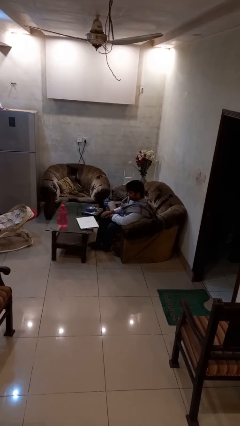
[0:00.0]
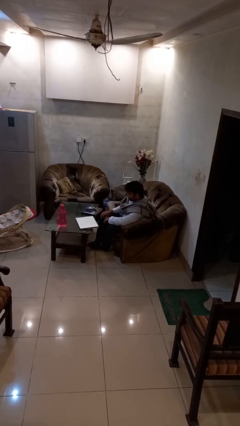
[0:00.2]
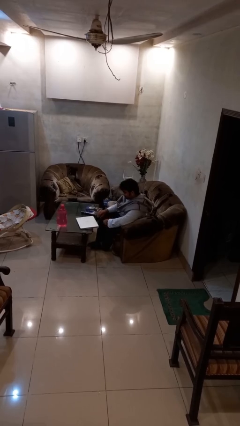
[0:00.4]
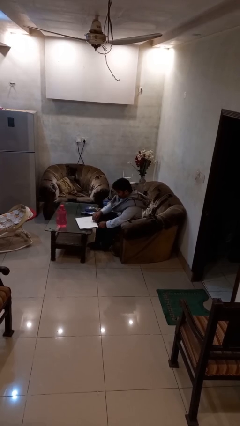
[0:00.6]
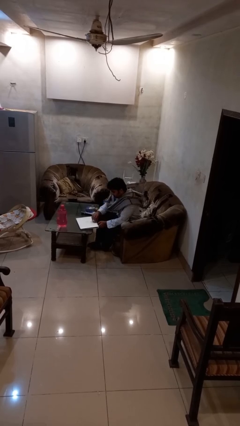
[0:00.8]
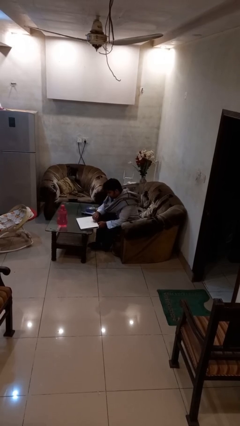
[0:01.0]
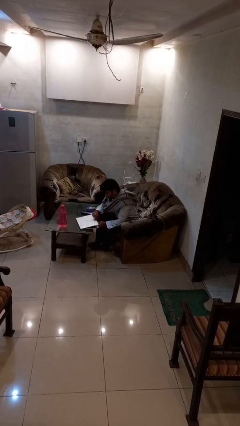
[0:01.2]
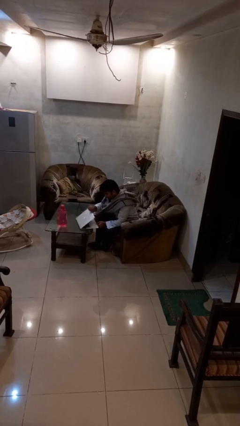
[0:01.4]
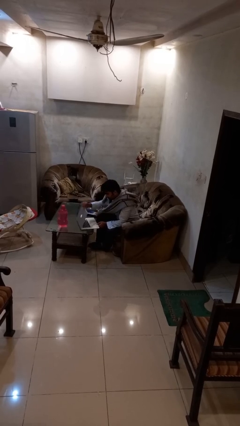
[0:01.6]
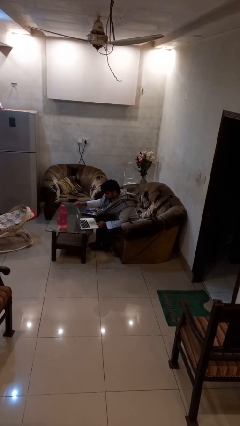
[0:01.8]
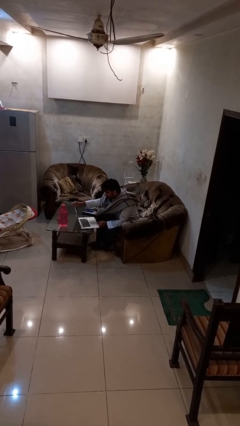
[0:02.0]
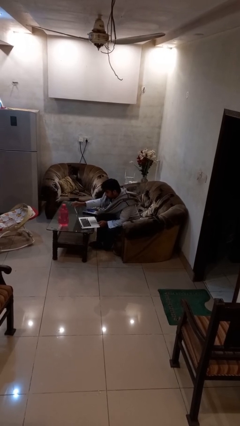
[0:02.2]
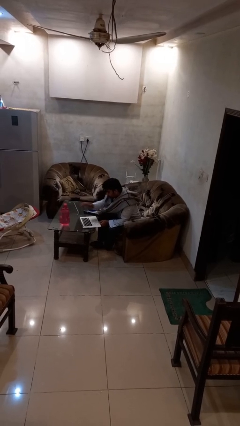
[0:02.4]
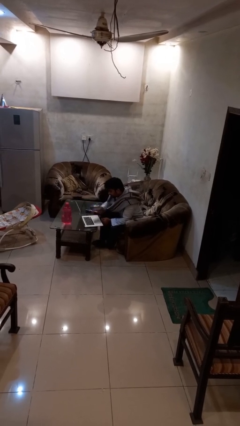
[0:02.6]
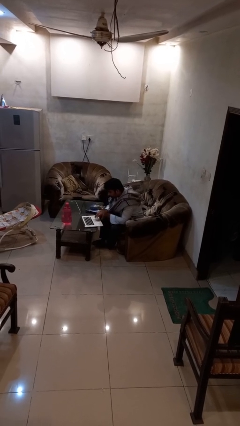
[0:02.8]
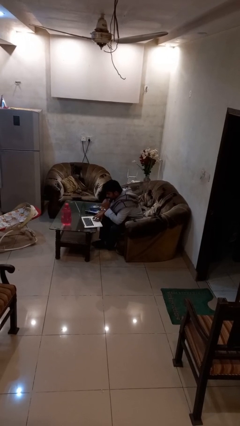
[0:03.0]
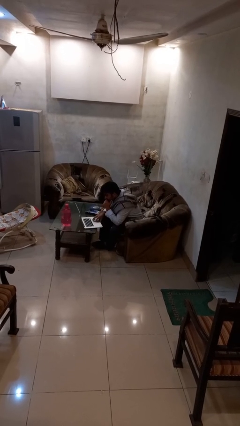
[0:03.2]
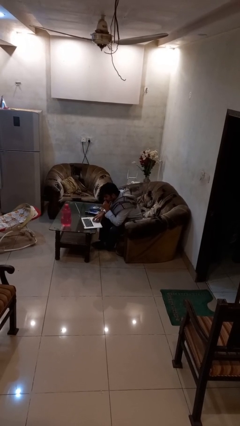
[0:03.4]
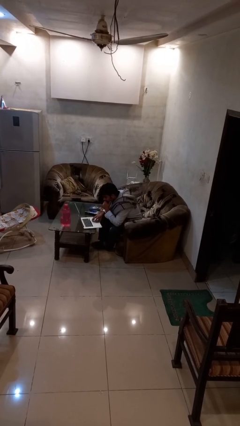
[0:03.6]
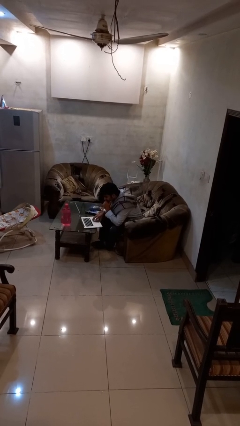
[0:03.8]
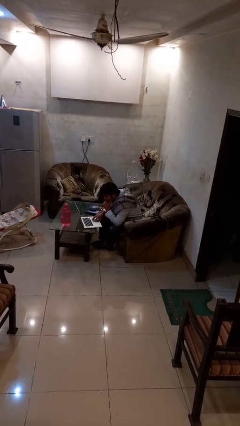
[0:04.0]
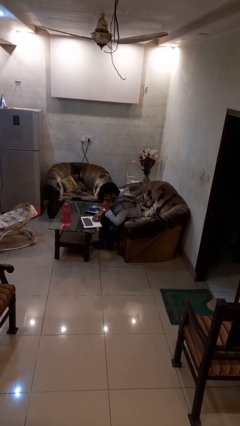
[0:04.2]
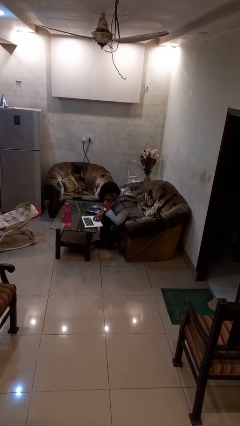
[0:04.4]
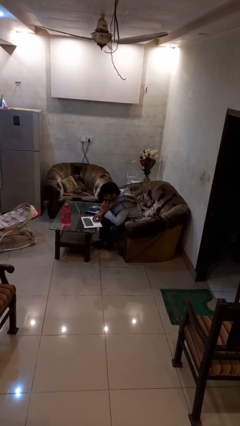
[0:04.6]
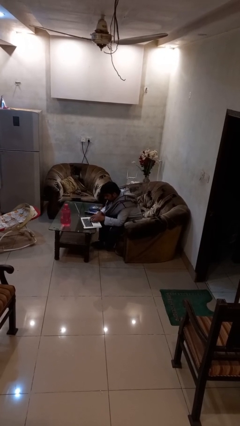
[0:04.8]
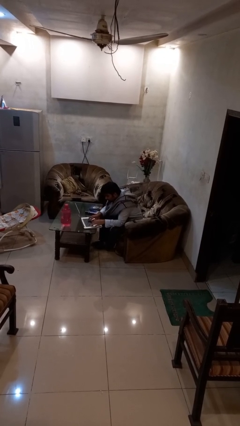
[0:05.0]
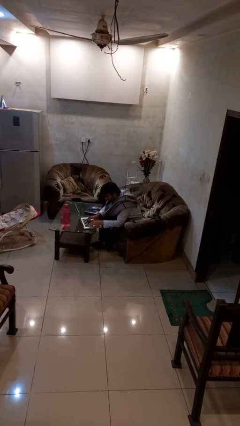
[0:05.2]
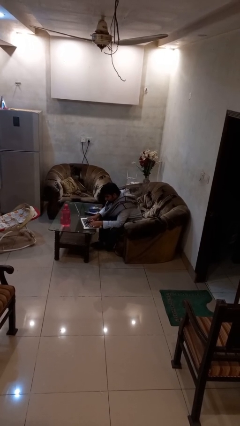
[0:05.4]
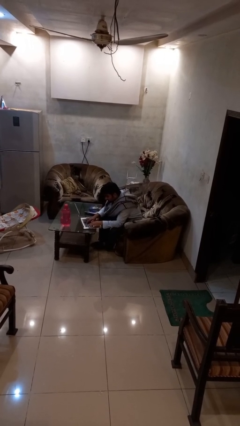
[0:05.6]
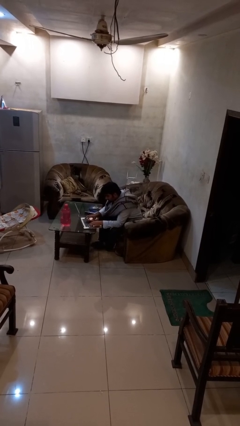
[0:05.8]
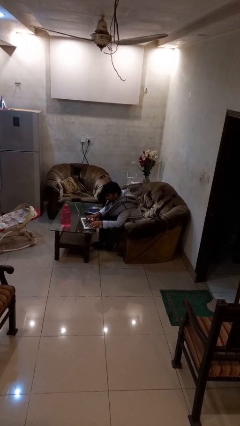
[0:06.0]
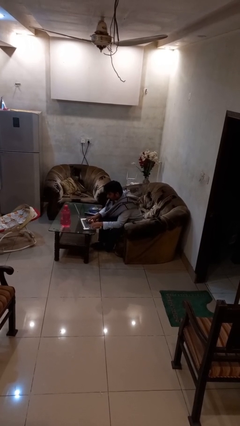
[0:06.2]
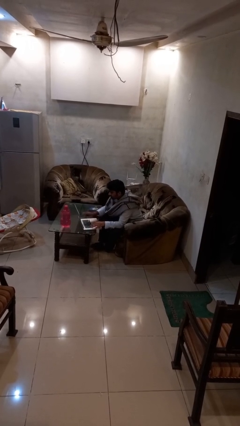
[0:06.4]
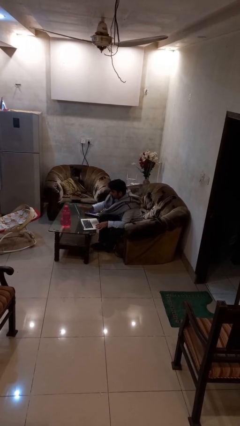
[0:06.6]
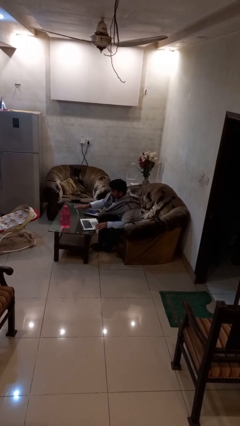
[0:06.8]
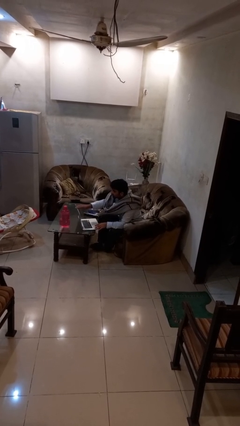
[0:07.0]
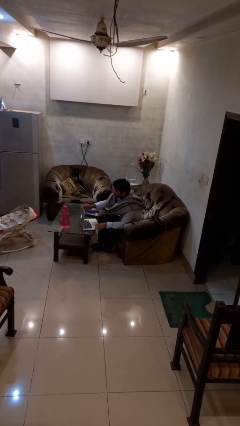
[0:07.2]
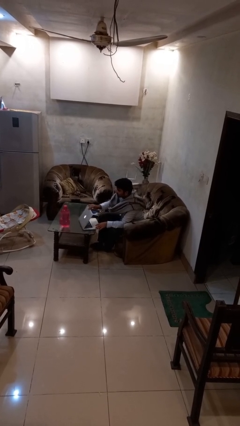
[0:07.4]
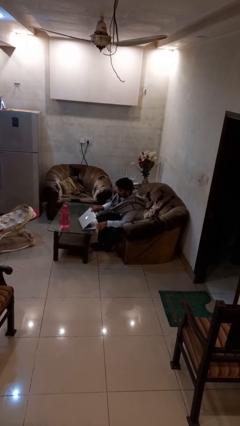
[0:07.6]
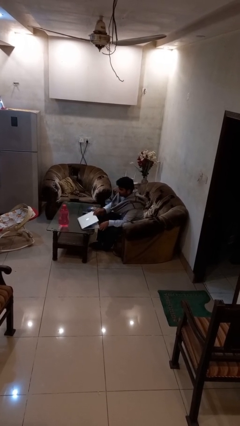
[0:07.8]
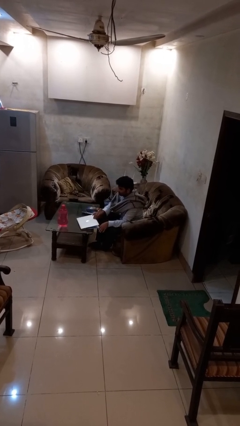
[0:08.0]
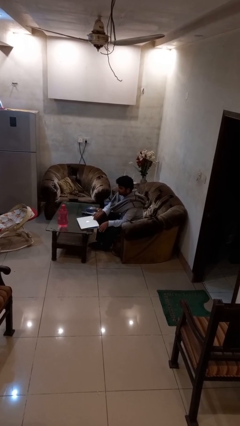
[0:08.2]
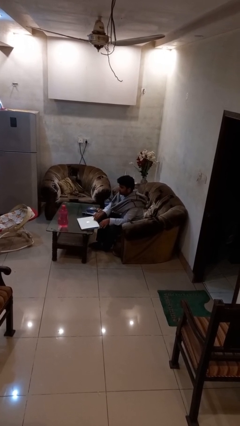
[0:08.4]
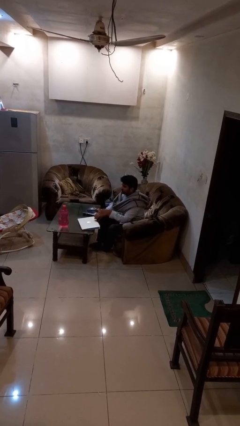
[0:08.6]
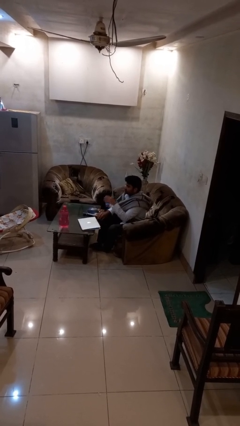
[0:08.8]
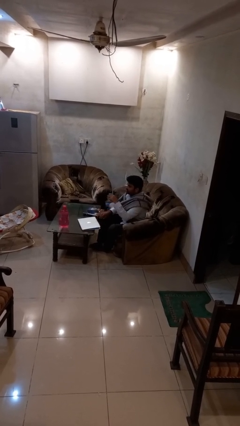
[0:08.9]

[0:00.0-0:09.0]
person interacts with laptop

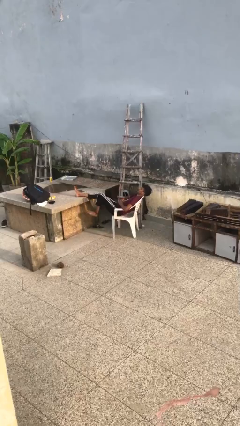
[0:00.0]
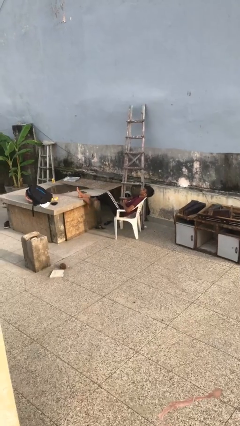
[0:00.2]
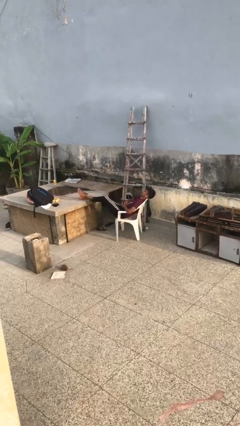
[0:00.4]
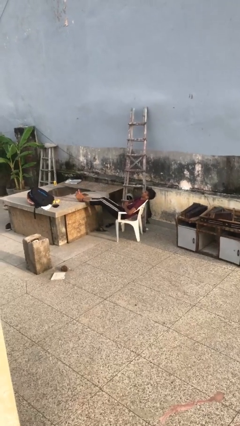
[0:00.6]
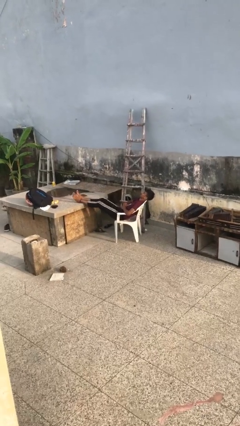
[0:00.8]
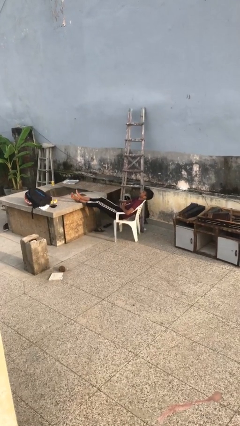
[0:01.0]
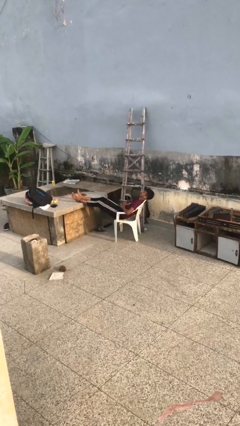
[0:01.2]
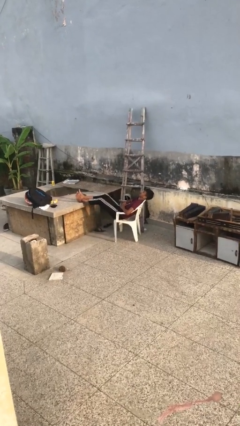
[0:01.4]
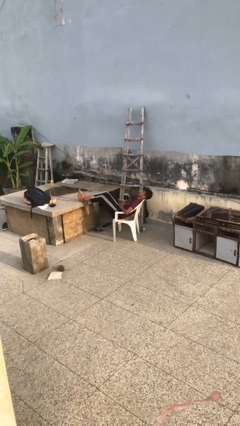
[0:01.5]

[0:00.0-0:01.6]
person puts feet up

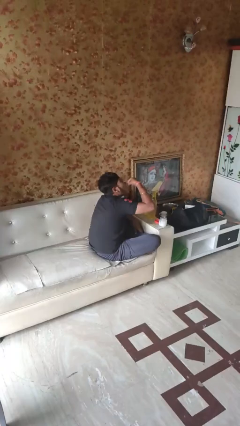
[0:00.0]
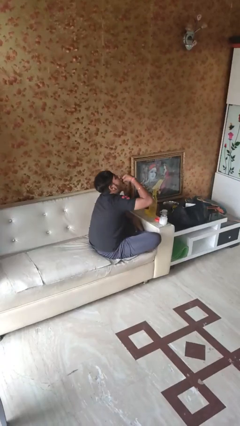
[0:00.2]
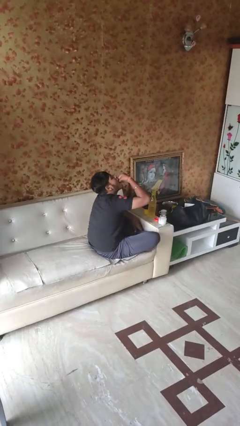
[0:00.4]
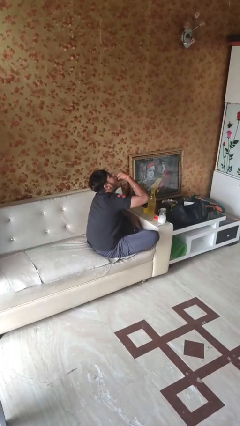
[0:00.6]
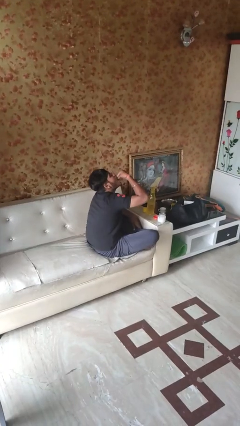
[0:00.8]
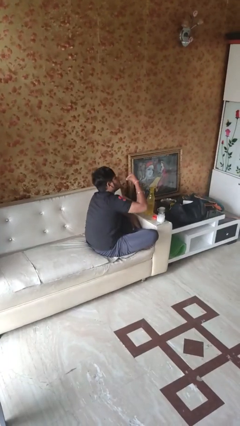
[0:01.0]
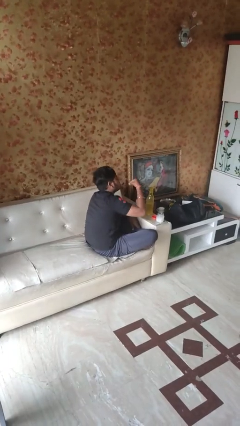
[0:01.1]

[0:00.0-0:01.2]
person takes medicine pills

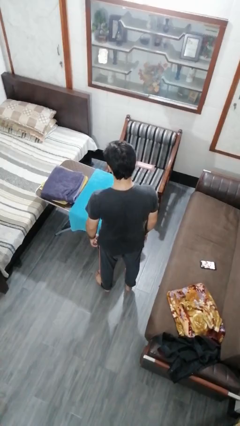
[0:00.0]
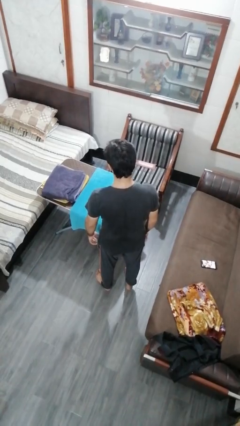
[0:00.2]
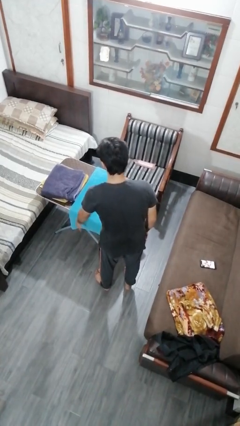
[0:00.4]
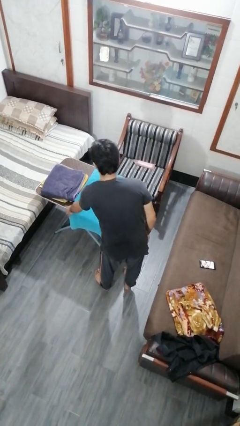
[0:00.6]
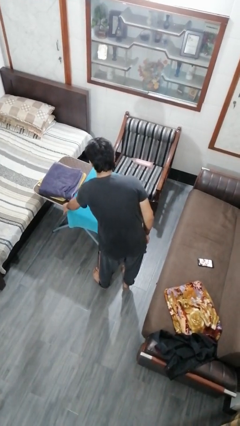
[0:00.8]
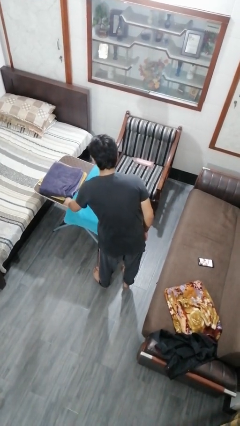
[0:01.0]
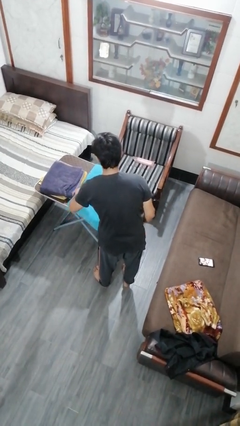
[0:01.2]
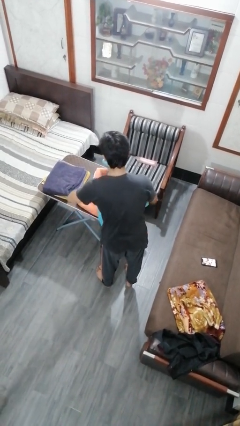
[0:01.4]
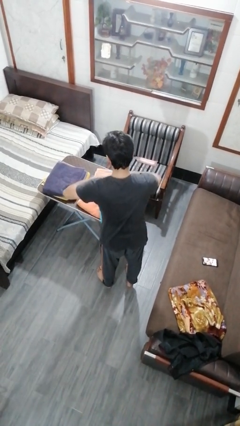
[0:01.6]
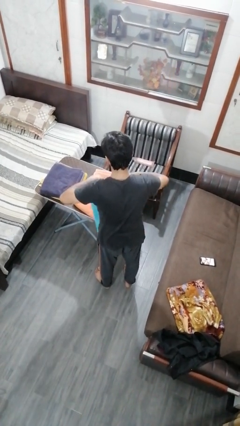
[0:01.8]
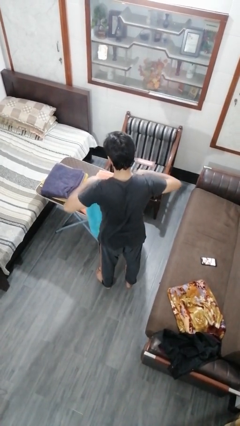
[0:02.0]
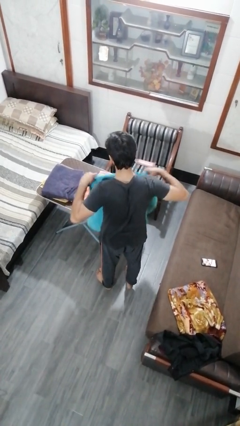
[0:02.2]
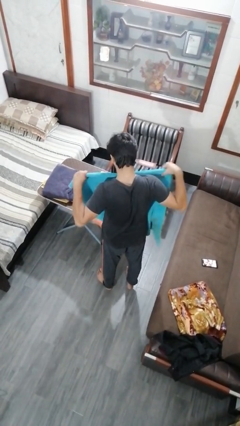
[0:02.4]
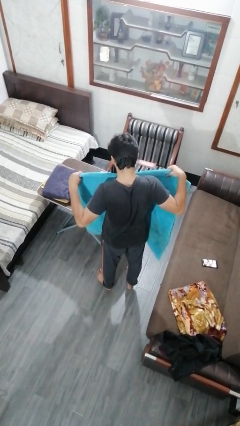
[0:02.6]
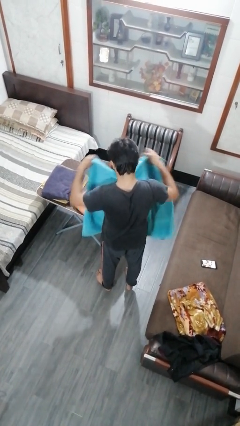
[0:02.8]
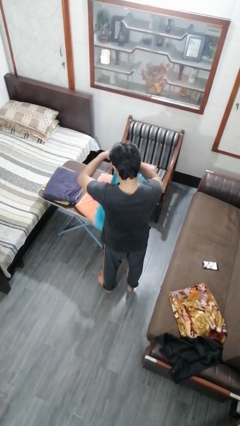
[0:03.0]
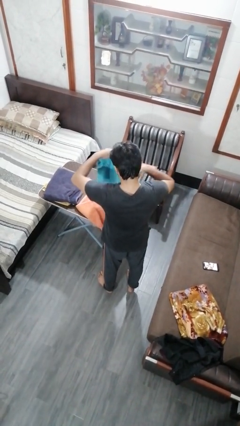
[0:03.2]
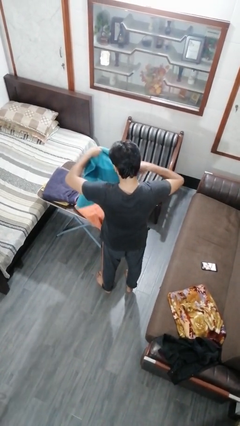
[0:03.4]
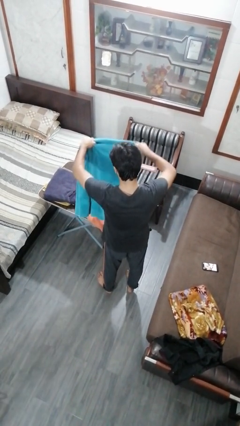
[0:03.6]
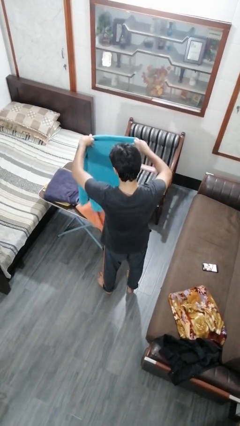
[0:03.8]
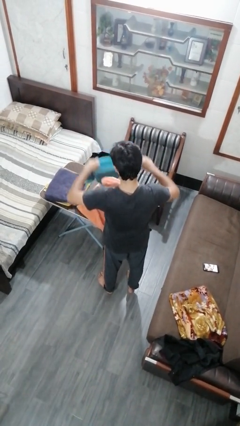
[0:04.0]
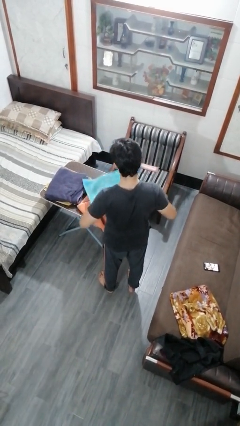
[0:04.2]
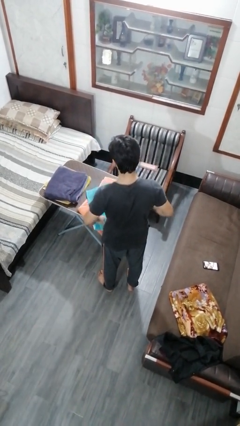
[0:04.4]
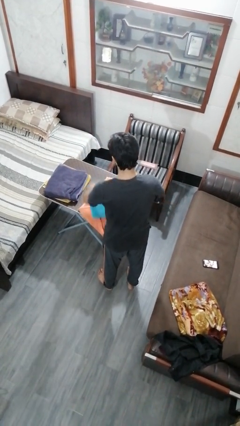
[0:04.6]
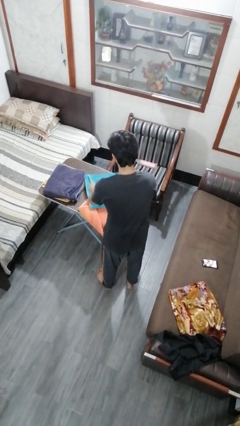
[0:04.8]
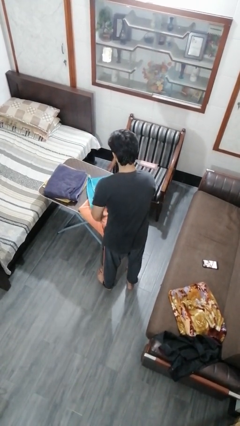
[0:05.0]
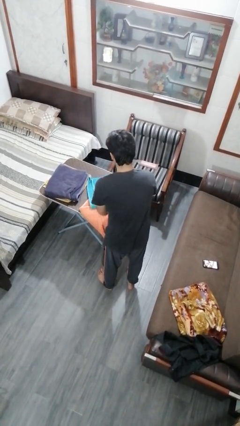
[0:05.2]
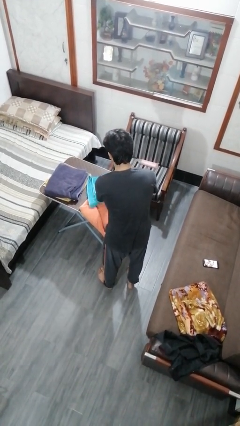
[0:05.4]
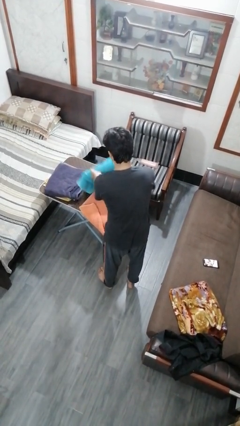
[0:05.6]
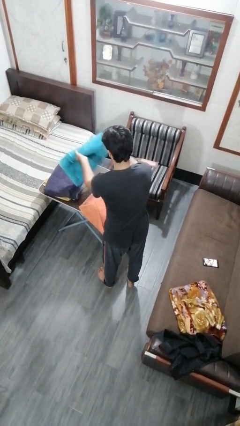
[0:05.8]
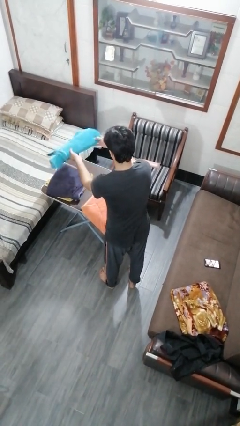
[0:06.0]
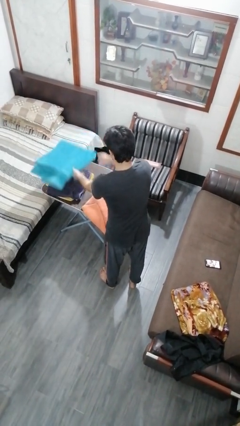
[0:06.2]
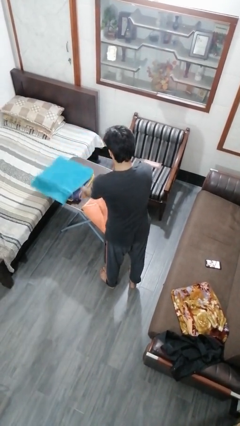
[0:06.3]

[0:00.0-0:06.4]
person folds towel
